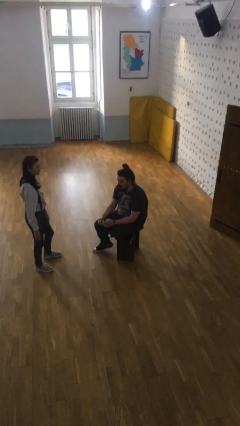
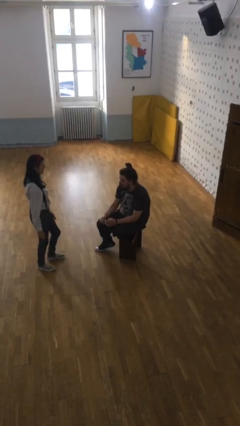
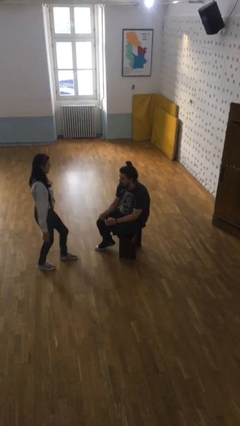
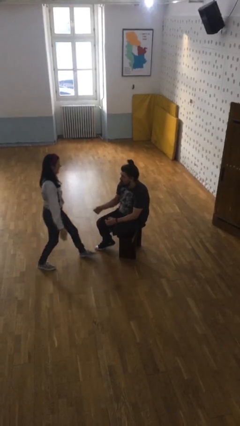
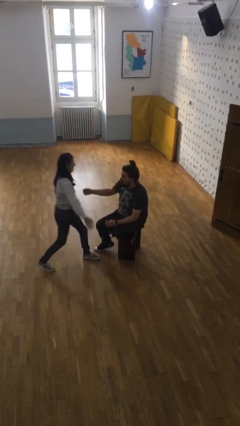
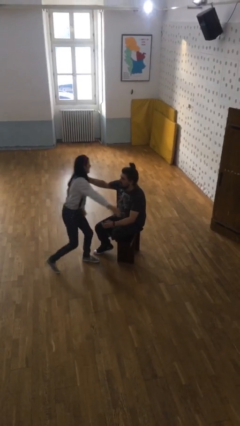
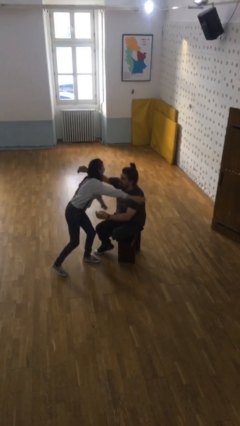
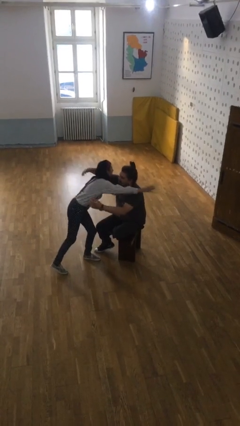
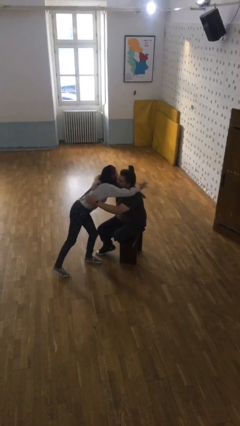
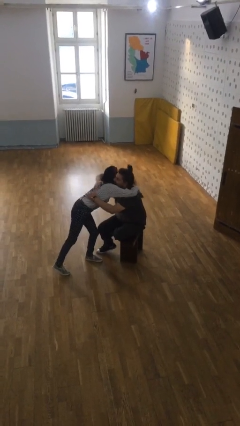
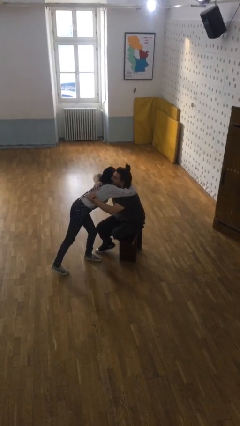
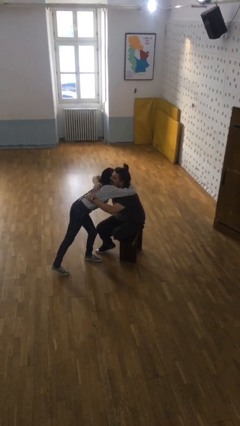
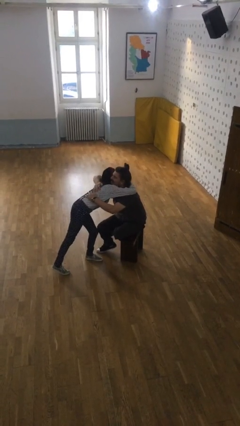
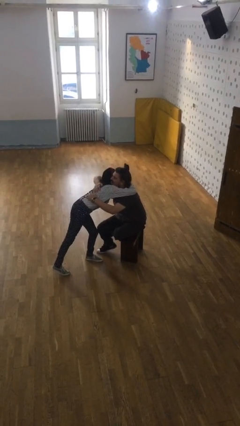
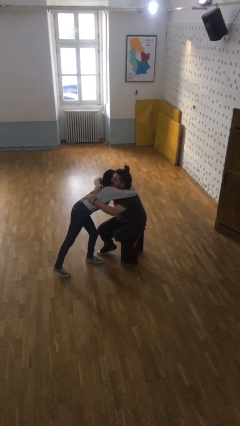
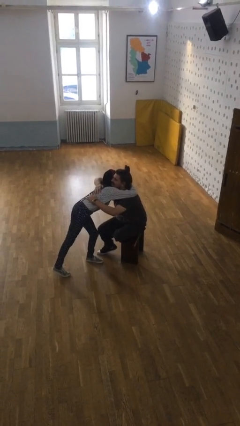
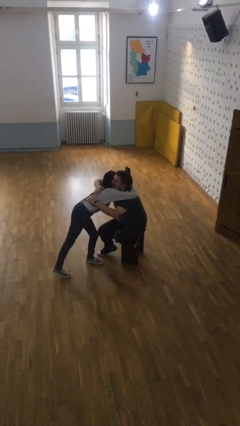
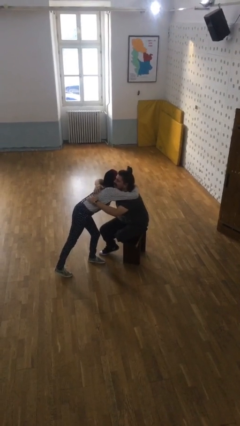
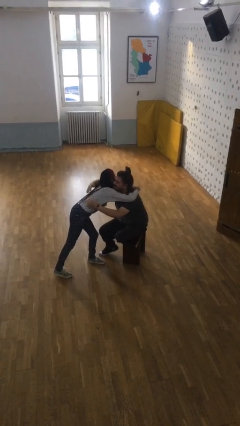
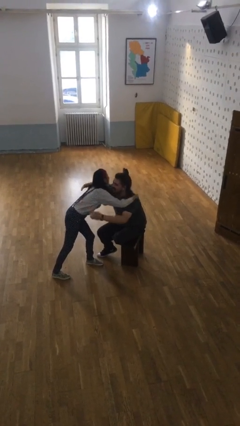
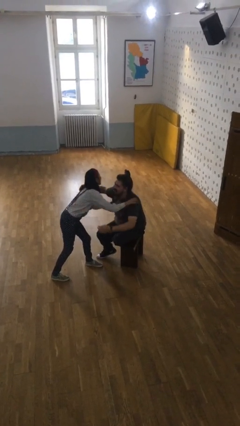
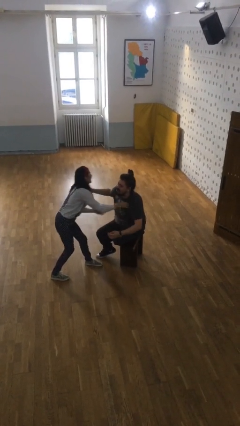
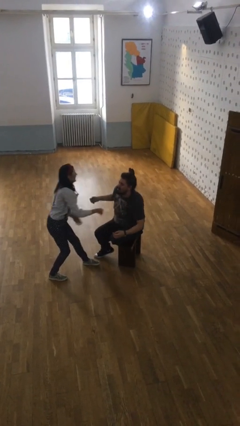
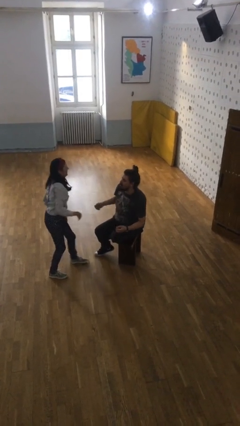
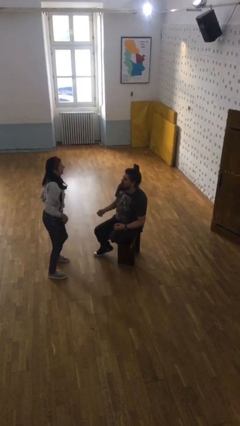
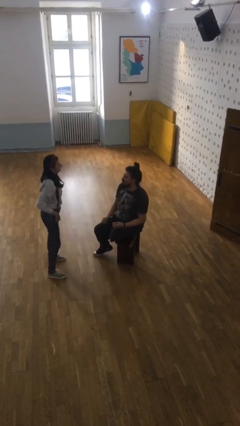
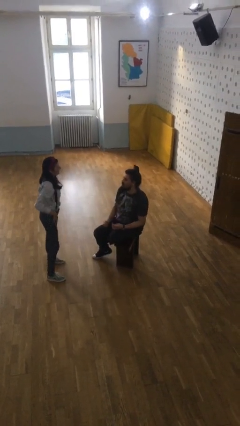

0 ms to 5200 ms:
person embraces person

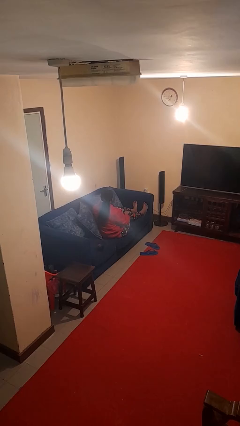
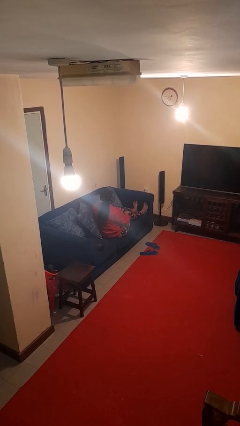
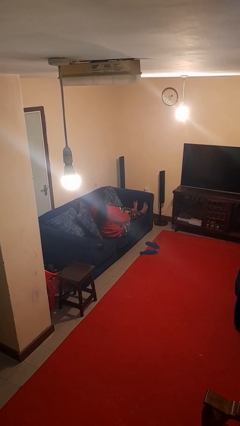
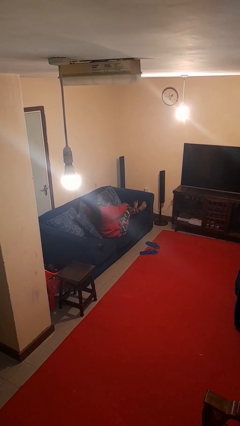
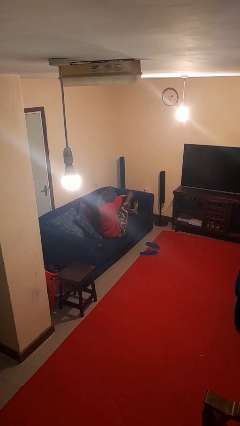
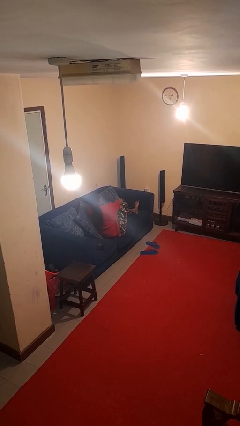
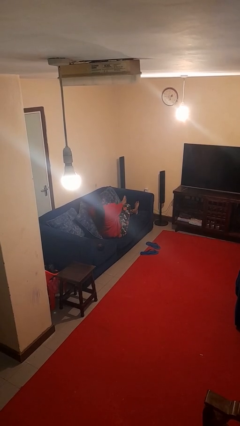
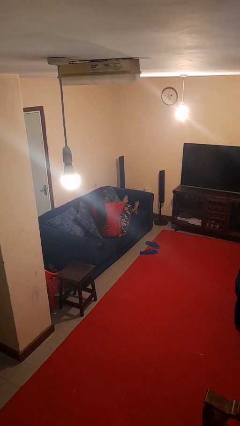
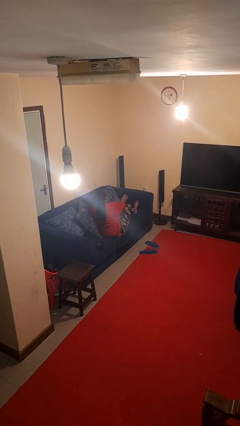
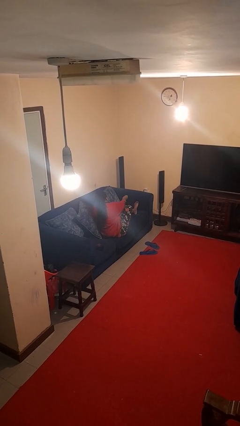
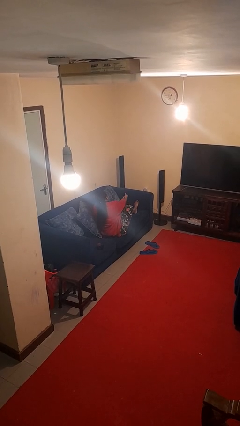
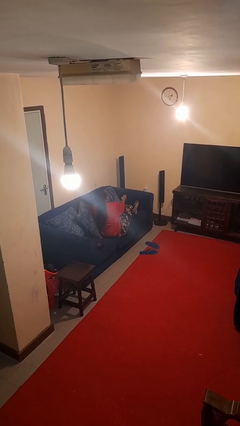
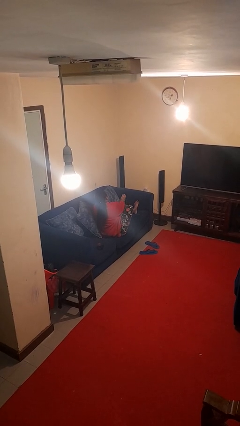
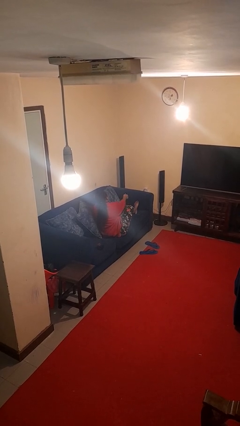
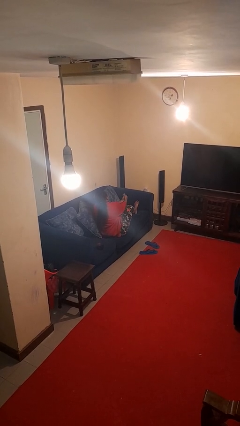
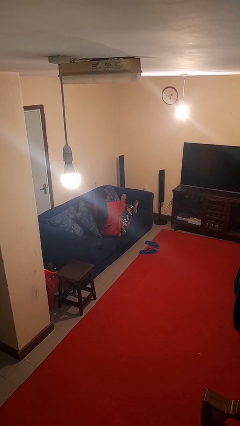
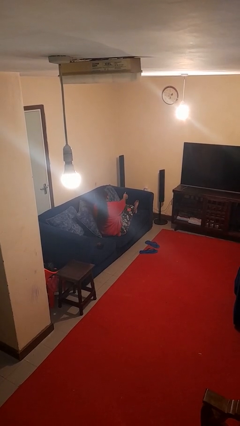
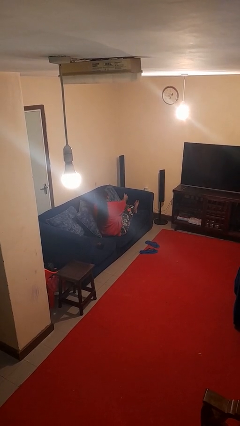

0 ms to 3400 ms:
person rubs foot

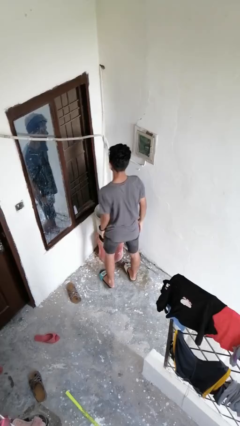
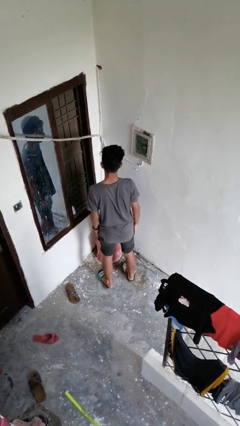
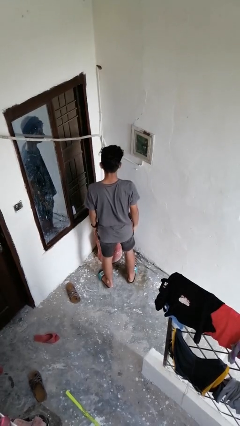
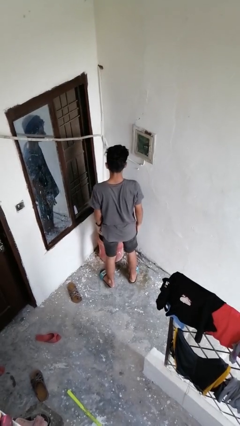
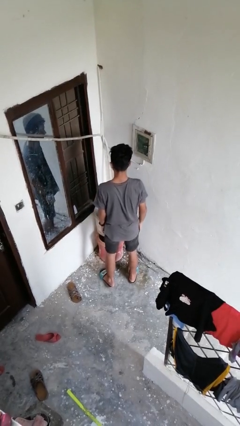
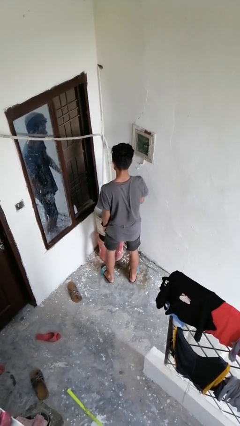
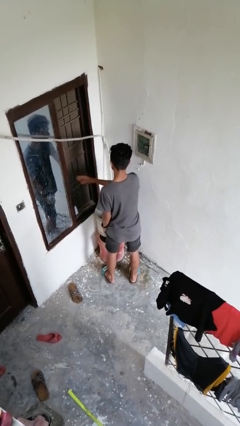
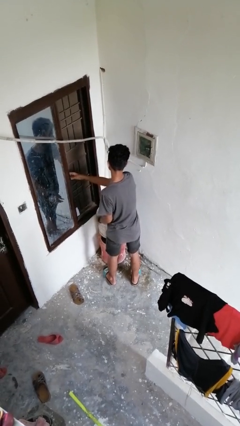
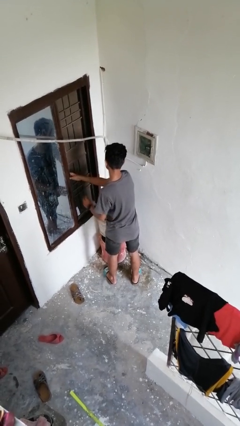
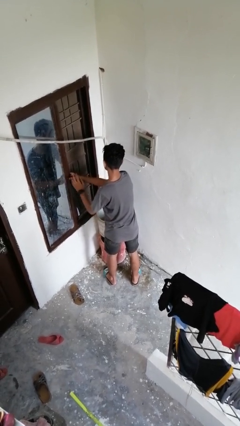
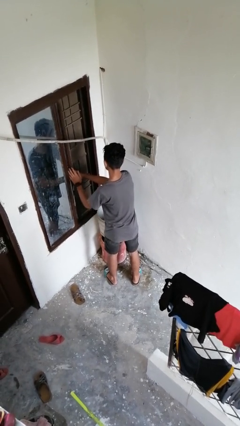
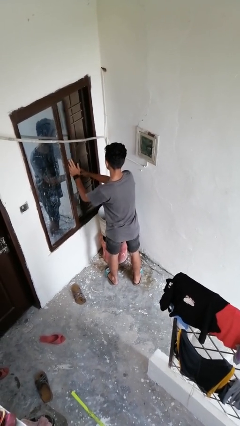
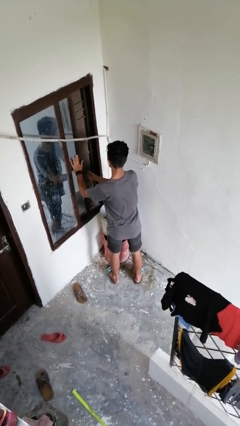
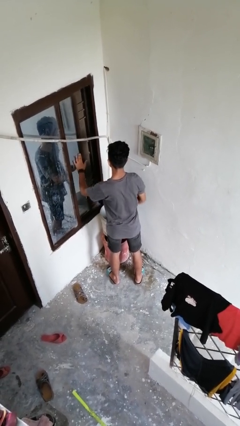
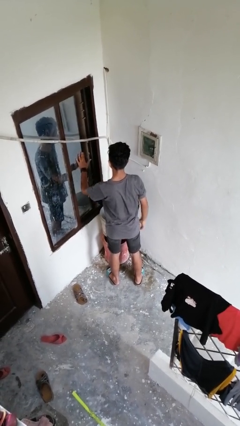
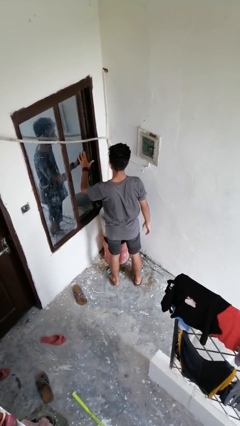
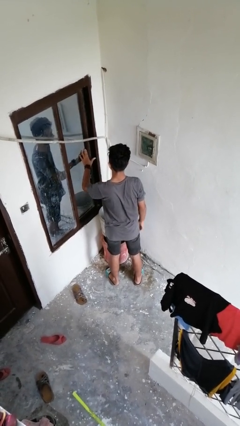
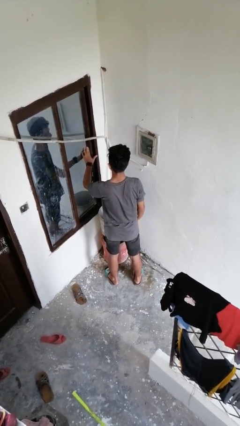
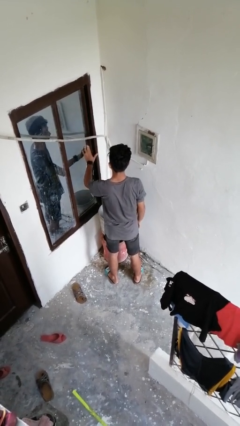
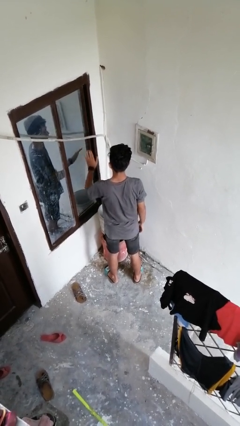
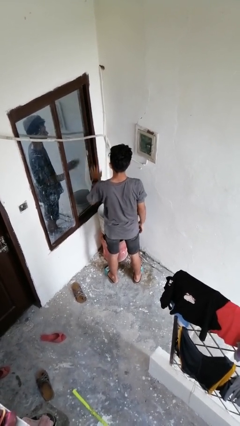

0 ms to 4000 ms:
person closes home window

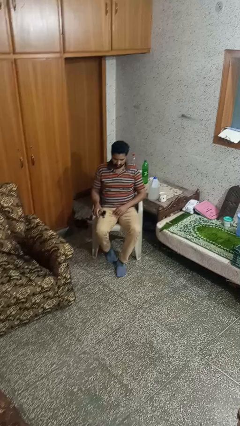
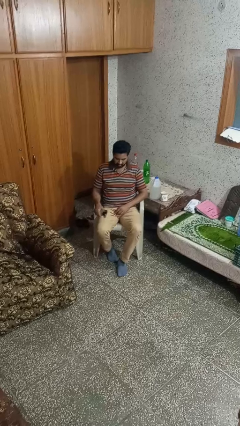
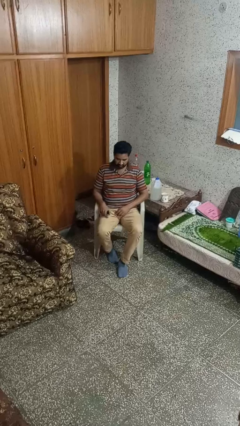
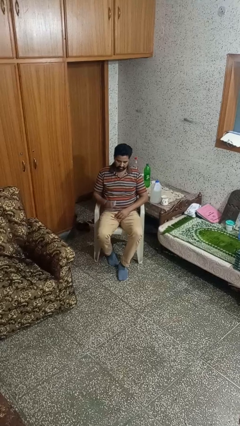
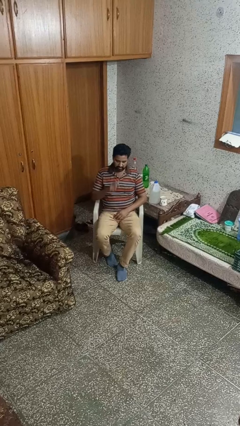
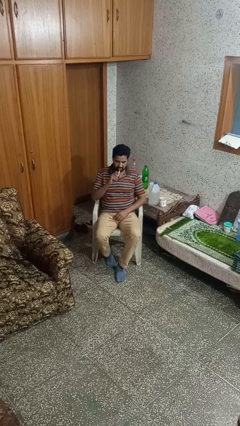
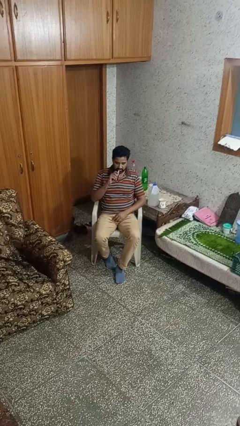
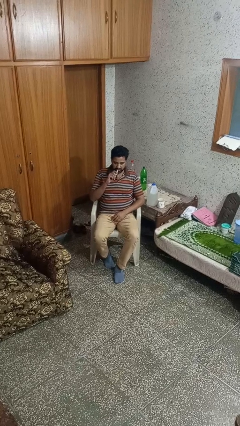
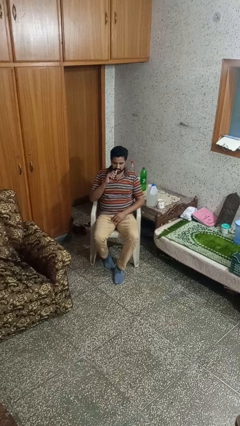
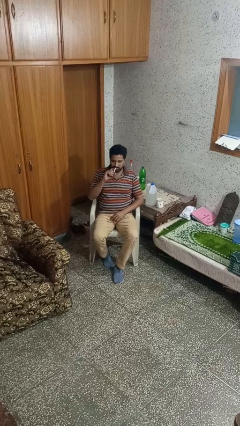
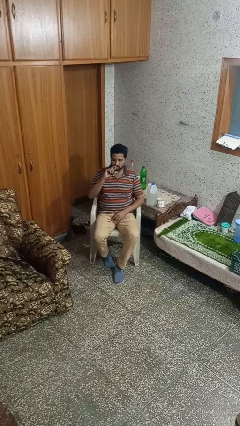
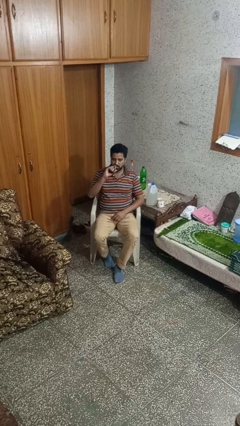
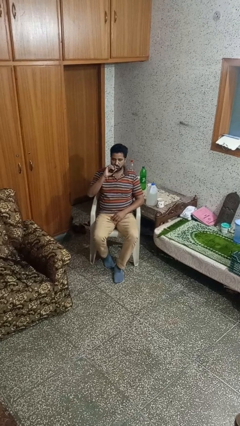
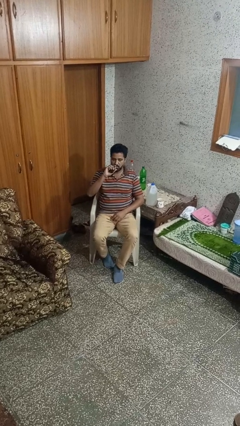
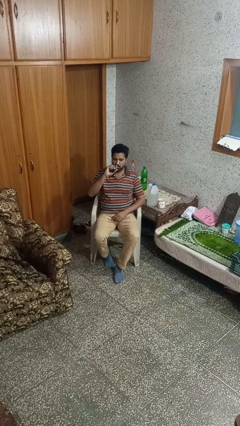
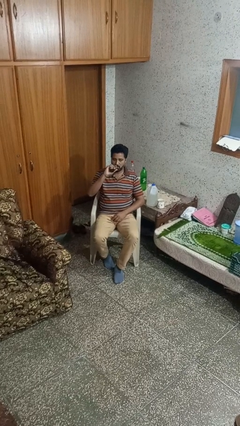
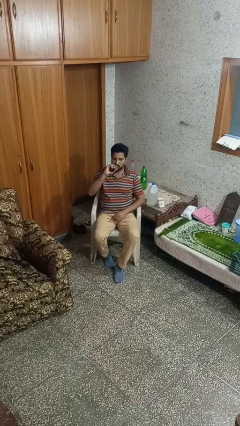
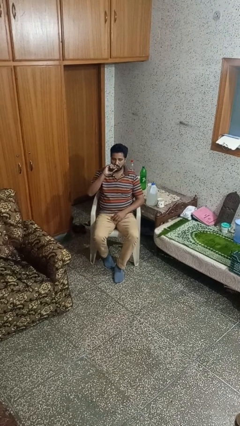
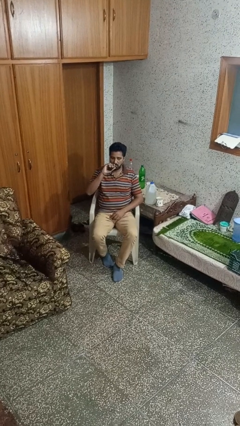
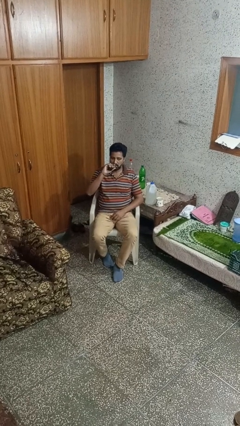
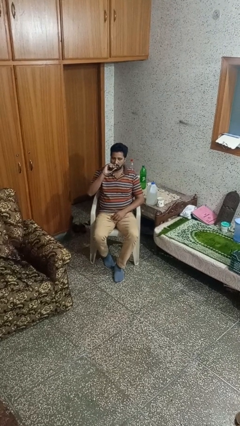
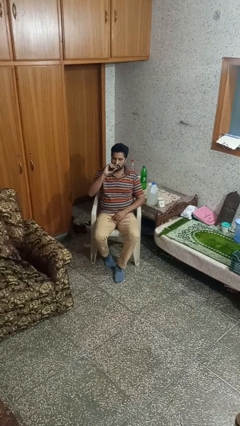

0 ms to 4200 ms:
person vapes

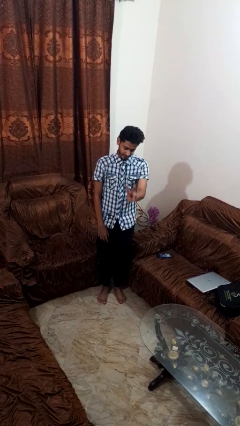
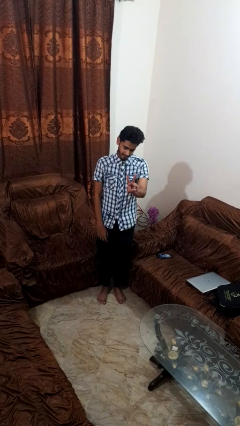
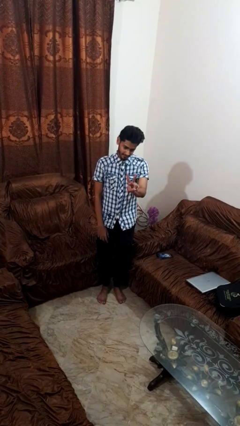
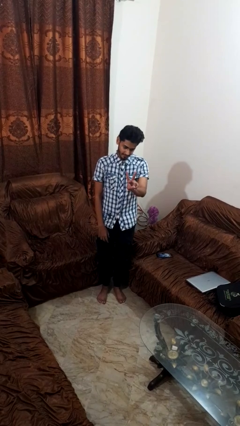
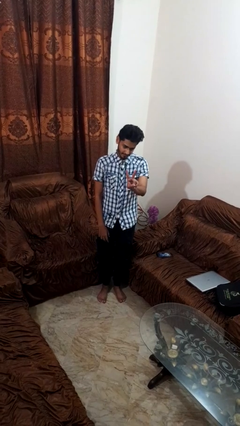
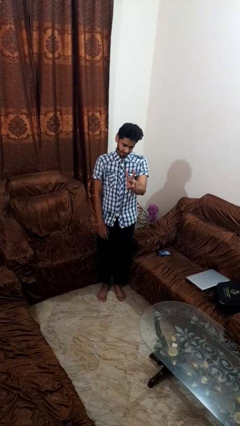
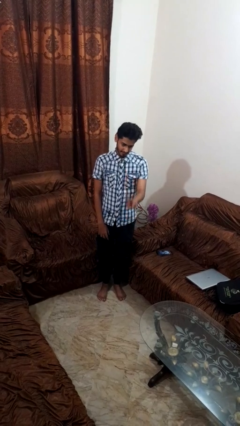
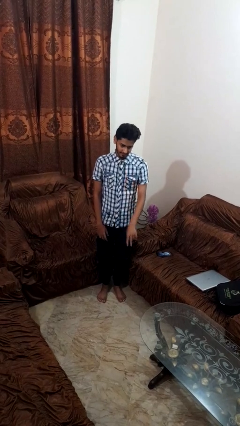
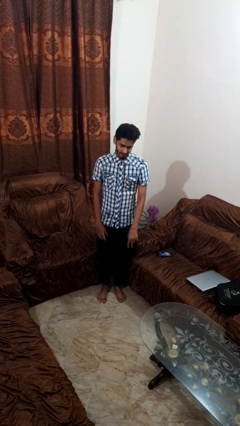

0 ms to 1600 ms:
person gestures peace
